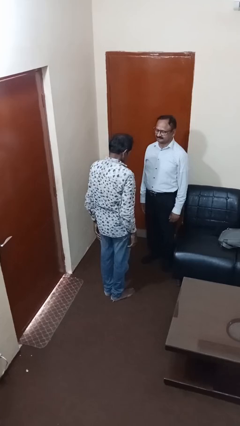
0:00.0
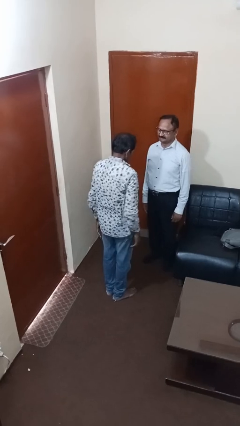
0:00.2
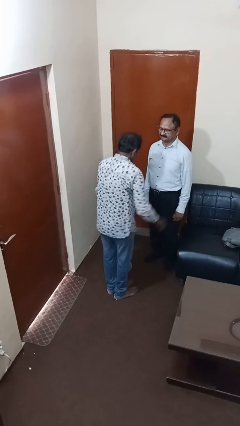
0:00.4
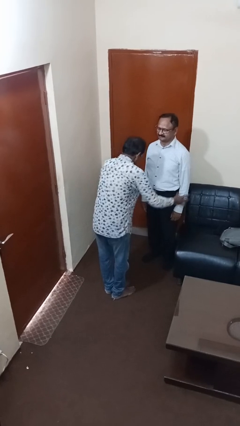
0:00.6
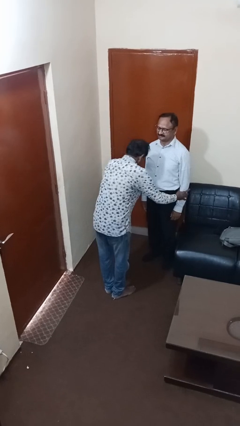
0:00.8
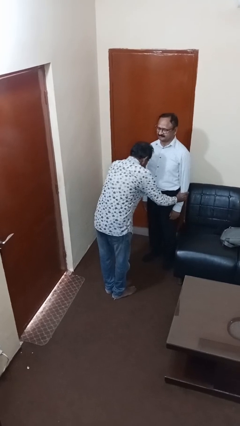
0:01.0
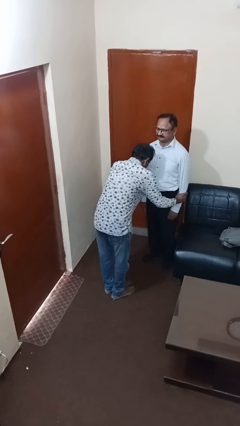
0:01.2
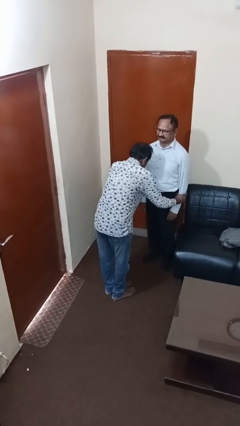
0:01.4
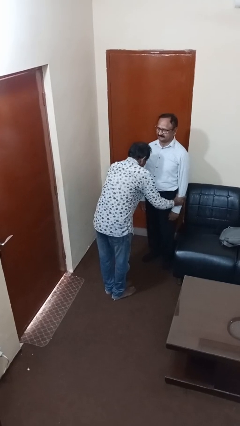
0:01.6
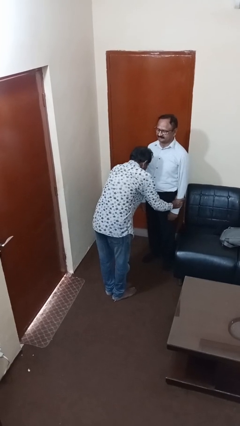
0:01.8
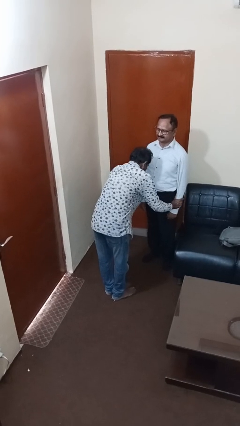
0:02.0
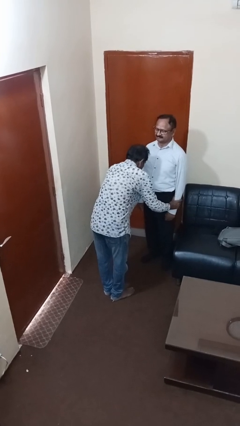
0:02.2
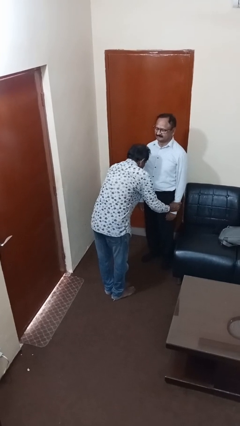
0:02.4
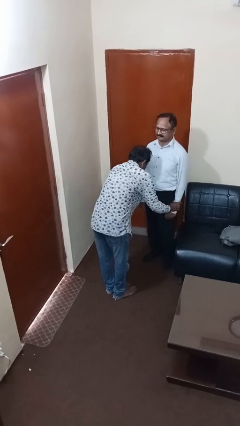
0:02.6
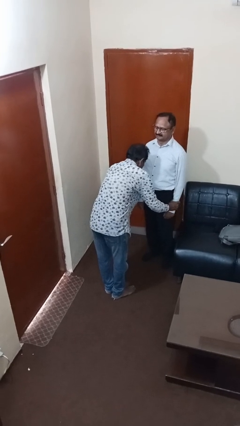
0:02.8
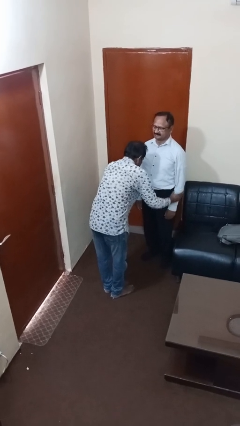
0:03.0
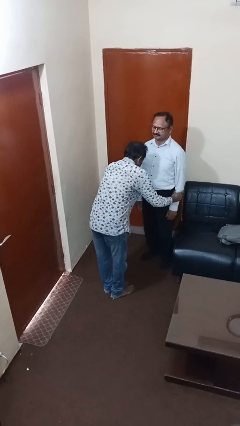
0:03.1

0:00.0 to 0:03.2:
person grabs person by forearm

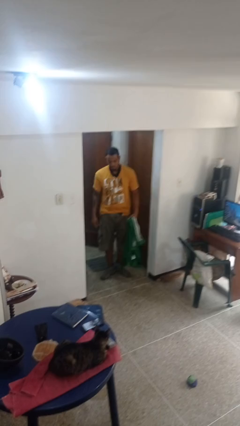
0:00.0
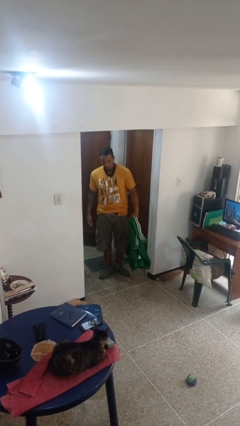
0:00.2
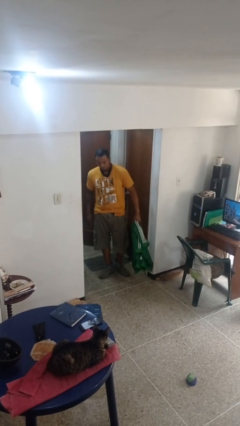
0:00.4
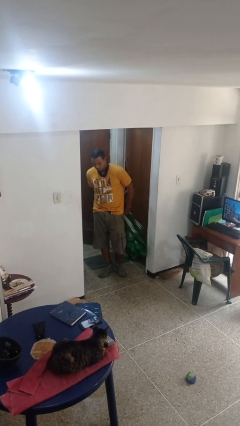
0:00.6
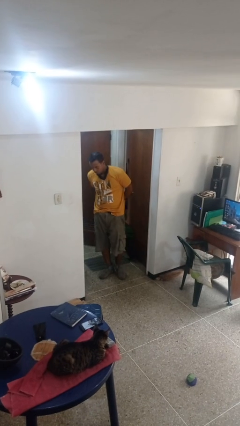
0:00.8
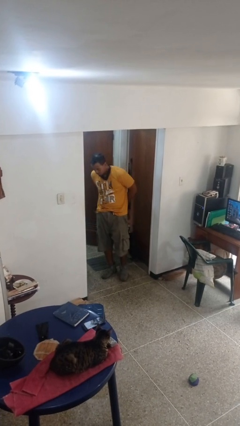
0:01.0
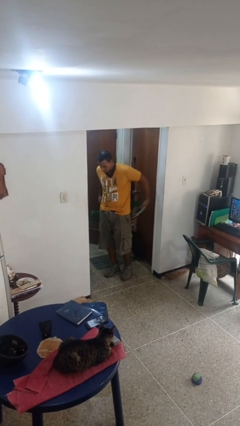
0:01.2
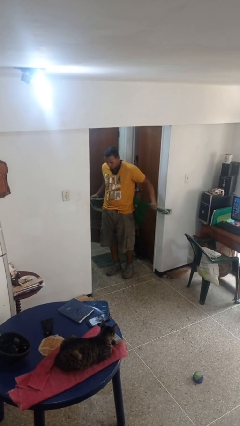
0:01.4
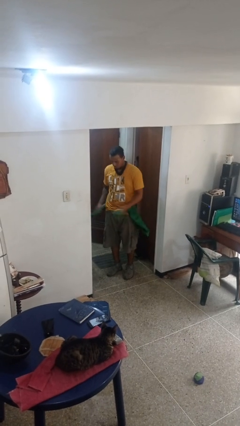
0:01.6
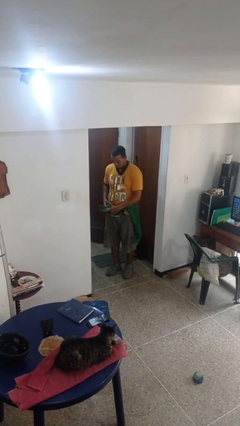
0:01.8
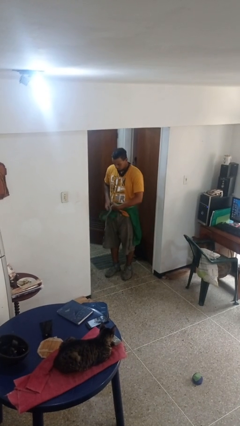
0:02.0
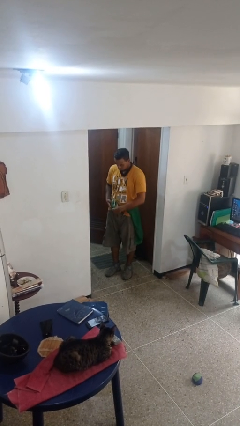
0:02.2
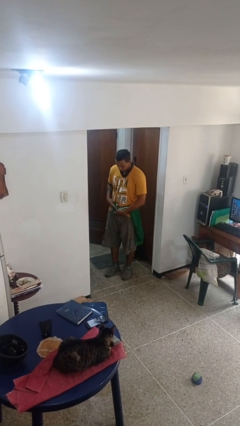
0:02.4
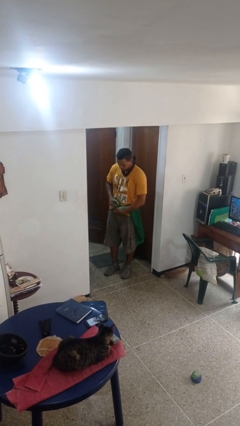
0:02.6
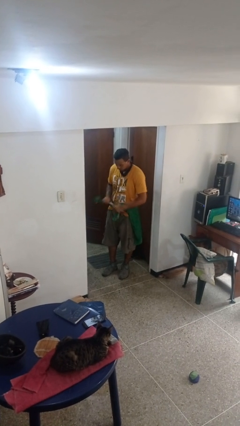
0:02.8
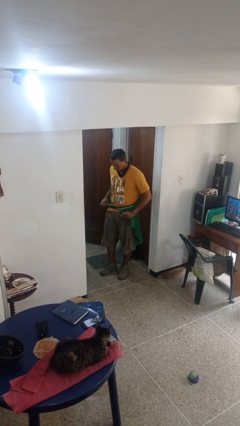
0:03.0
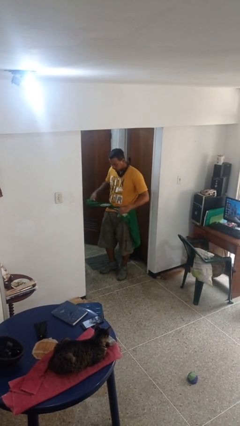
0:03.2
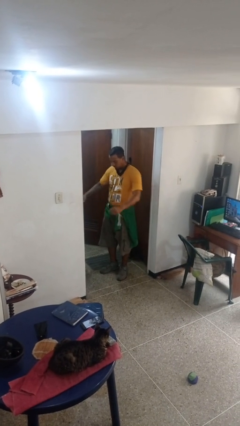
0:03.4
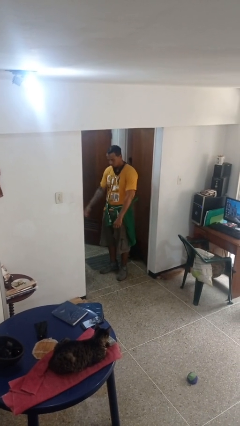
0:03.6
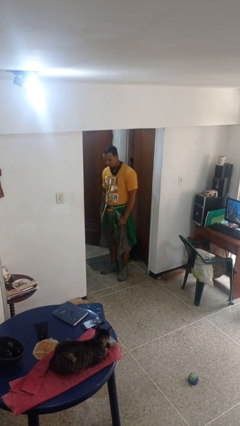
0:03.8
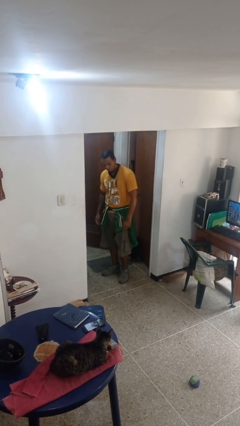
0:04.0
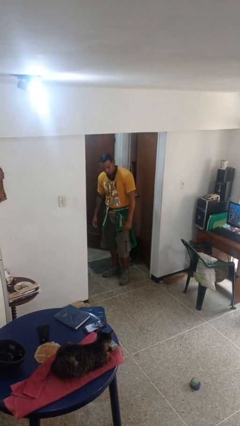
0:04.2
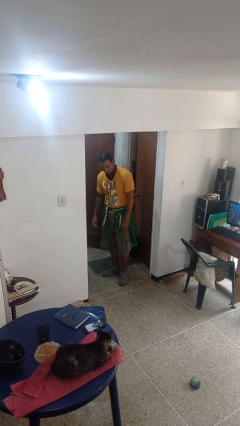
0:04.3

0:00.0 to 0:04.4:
person ties jacket around waist

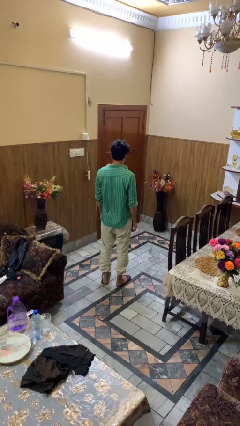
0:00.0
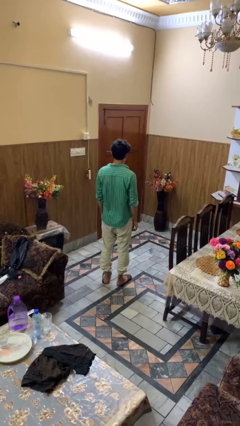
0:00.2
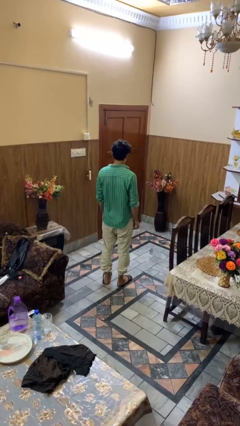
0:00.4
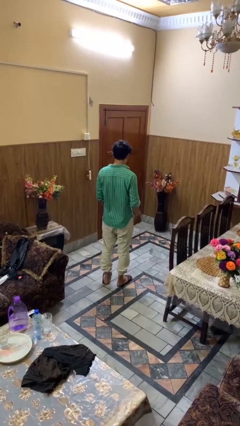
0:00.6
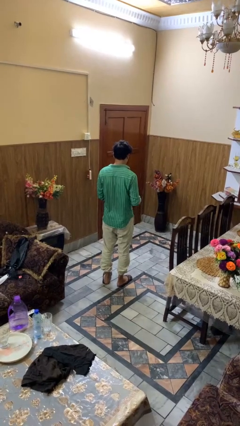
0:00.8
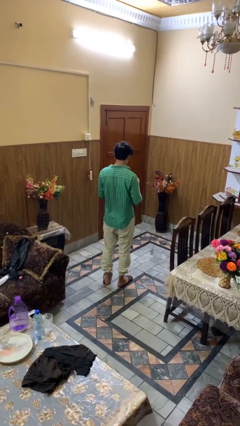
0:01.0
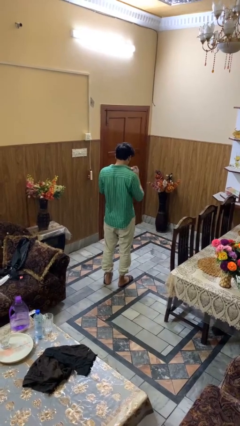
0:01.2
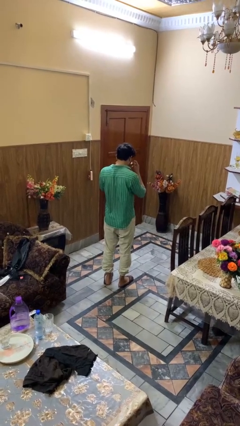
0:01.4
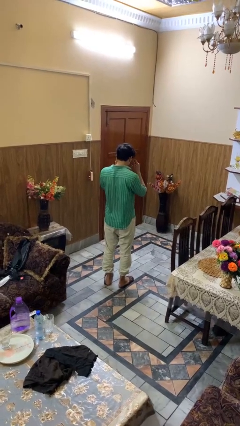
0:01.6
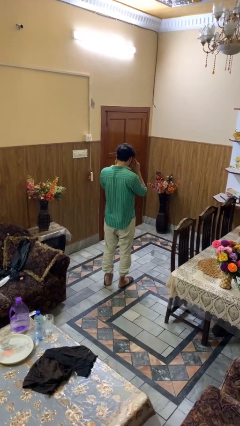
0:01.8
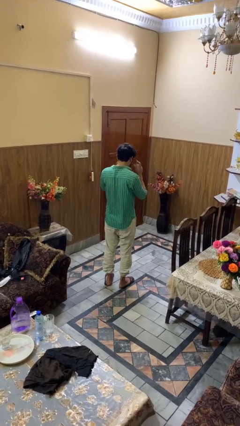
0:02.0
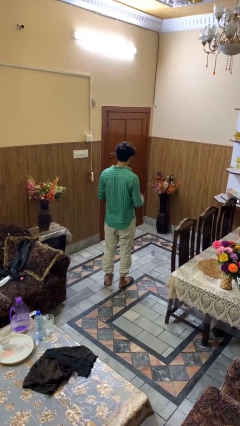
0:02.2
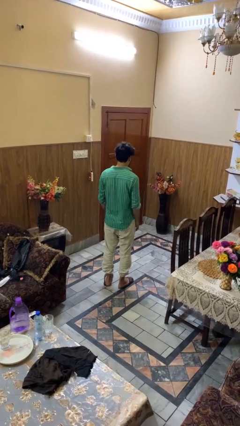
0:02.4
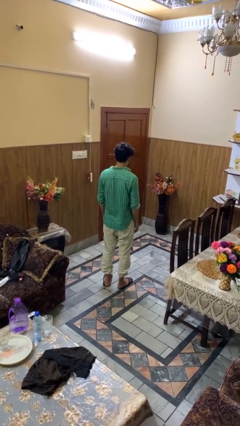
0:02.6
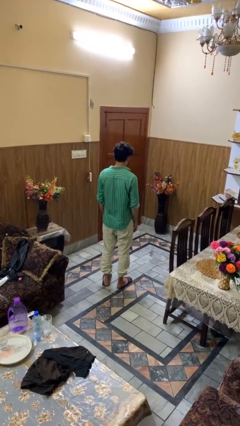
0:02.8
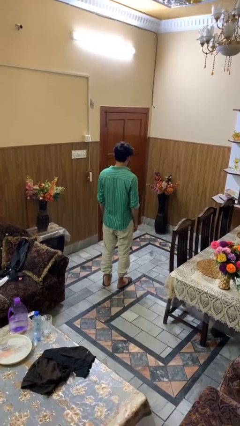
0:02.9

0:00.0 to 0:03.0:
person puts on glasses

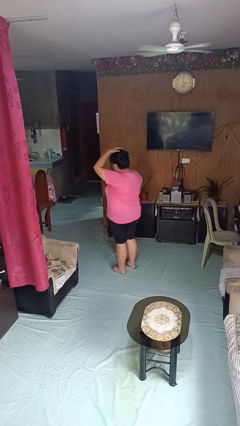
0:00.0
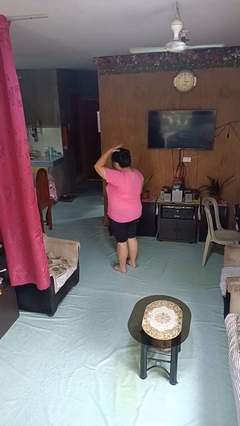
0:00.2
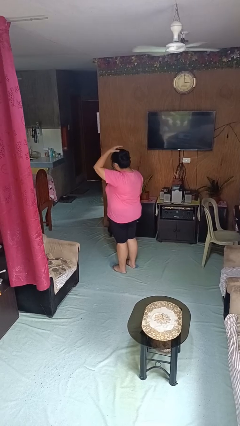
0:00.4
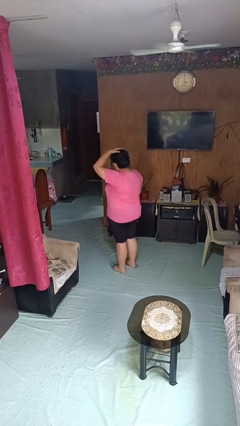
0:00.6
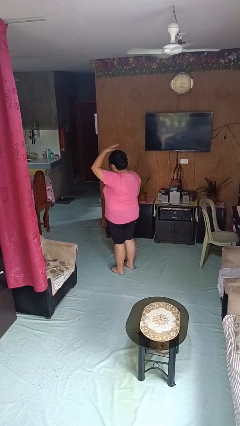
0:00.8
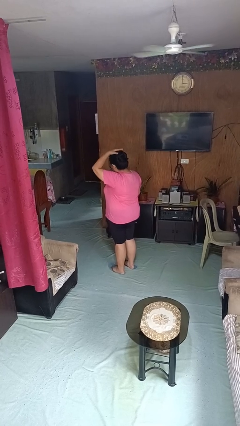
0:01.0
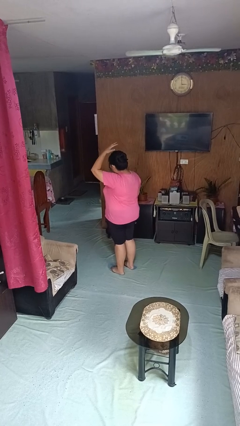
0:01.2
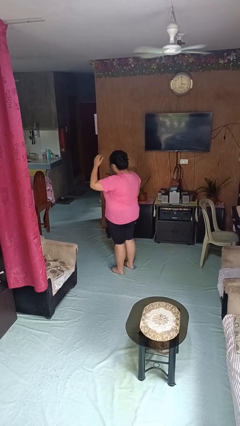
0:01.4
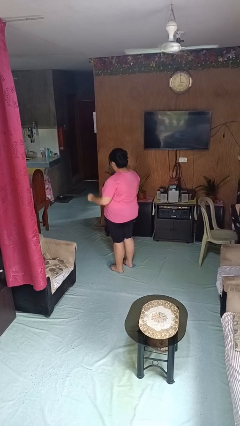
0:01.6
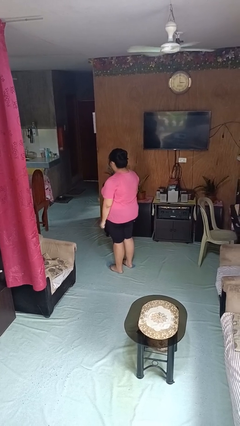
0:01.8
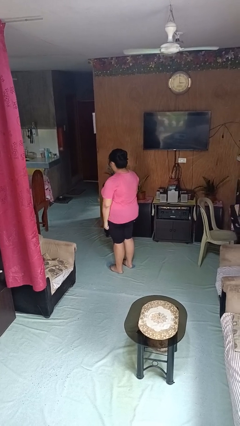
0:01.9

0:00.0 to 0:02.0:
person pats head

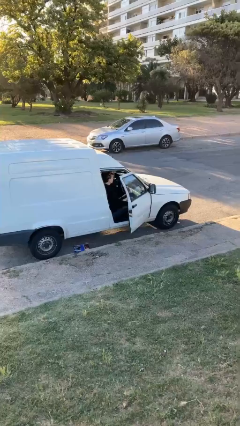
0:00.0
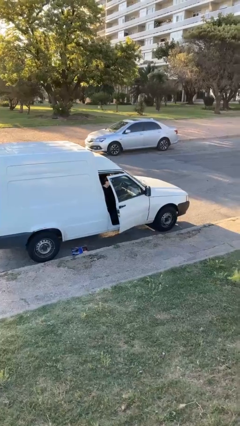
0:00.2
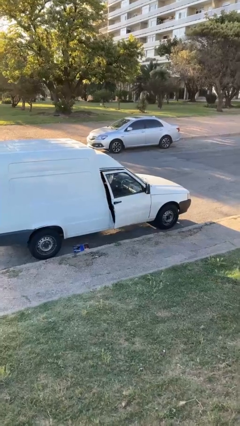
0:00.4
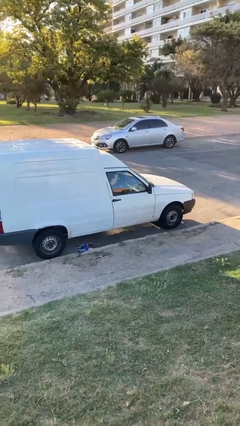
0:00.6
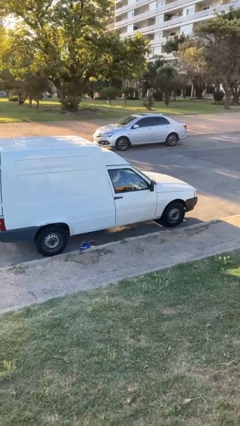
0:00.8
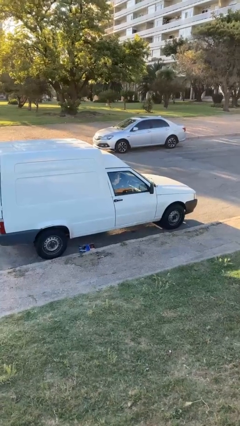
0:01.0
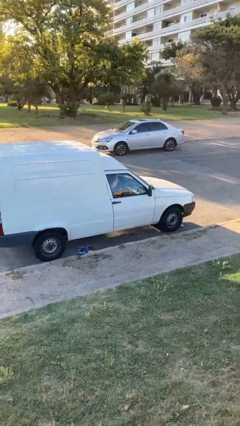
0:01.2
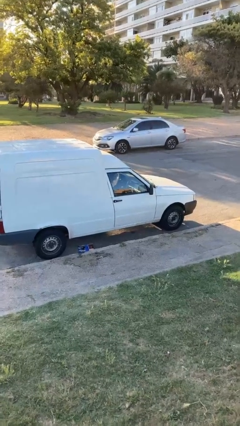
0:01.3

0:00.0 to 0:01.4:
person closes car door

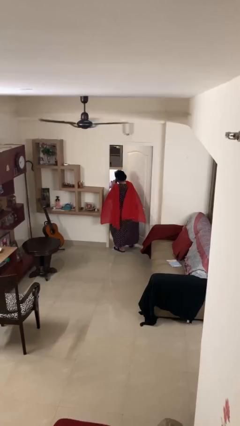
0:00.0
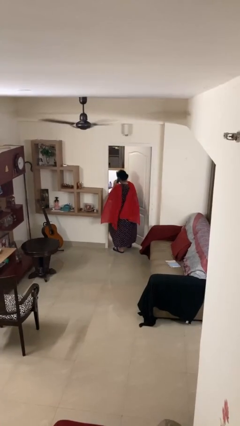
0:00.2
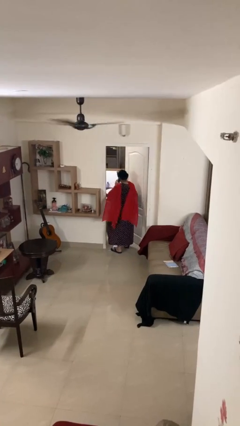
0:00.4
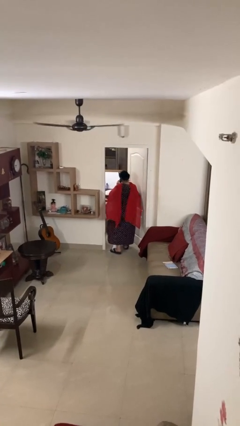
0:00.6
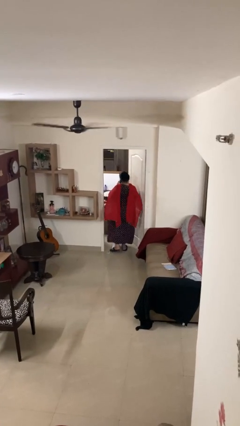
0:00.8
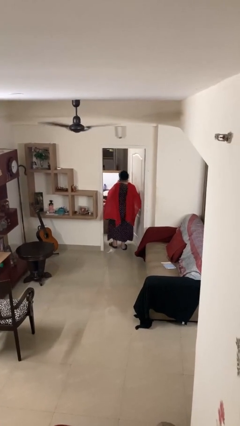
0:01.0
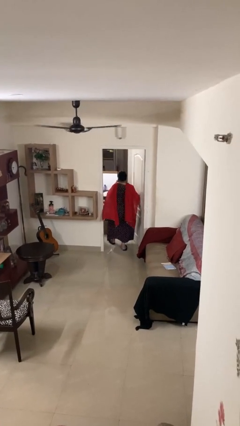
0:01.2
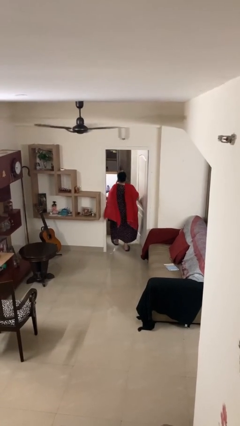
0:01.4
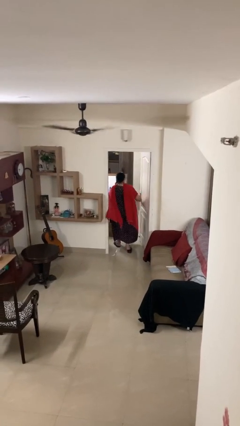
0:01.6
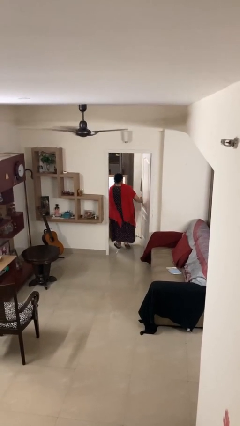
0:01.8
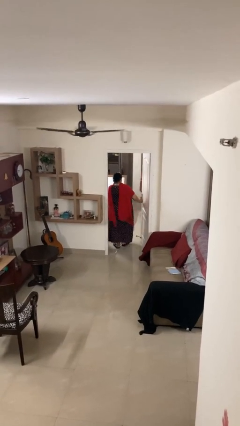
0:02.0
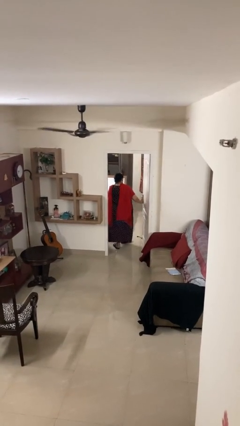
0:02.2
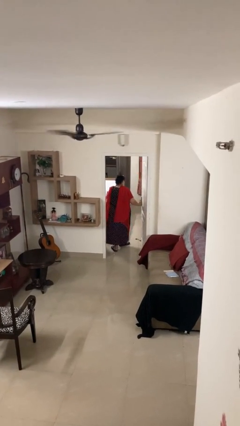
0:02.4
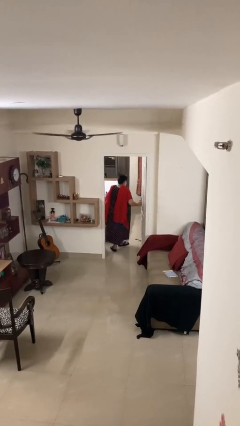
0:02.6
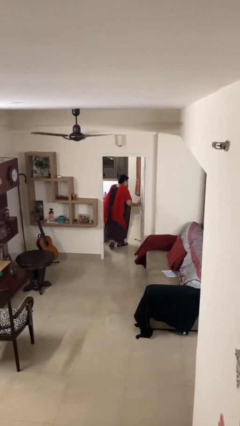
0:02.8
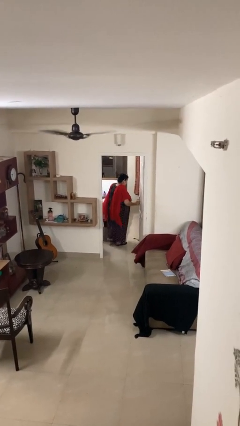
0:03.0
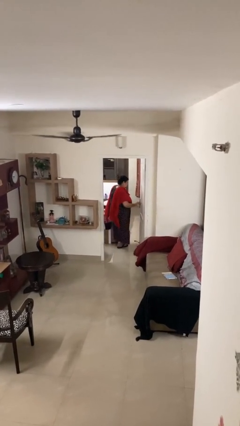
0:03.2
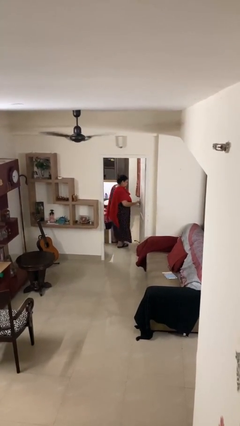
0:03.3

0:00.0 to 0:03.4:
person exits scene through structure
